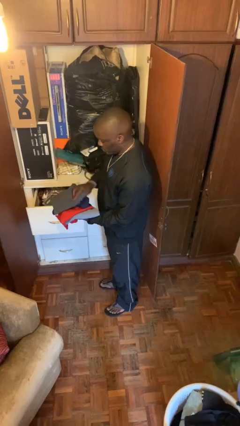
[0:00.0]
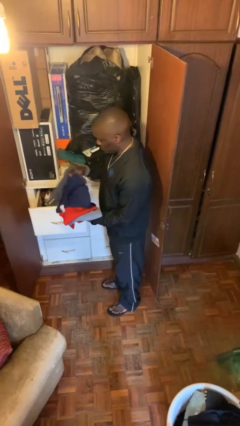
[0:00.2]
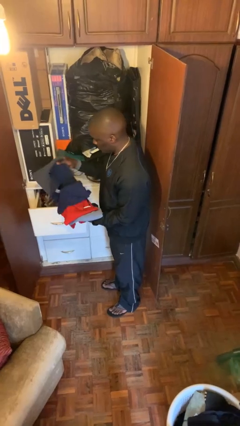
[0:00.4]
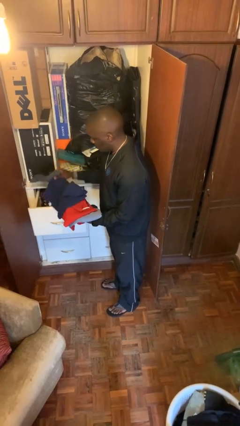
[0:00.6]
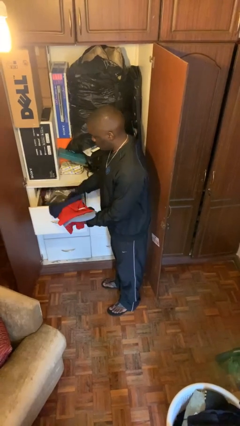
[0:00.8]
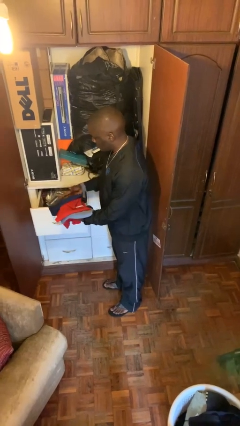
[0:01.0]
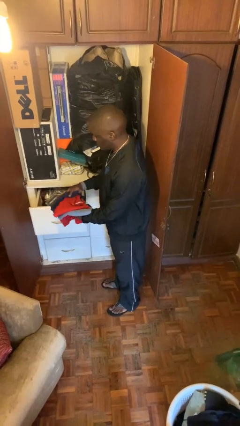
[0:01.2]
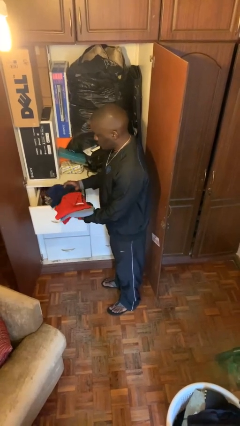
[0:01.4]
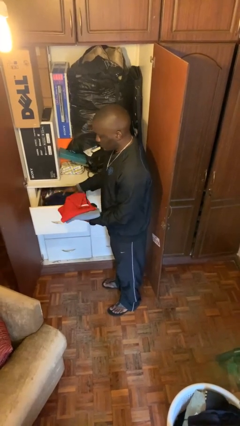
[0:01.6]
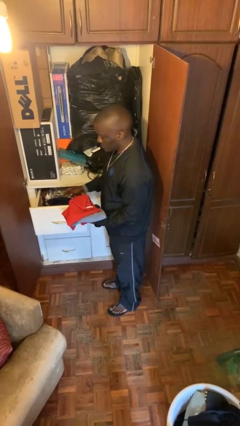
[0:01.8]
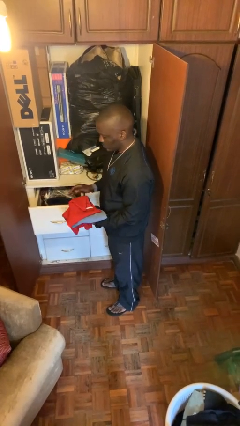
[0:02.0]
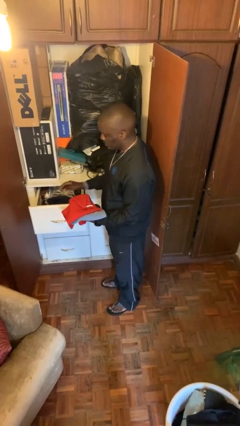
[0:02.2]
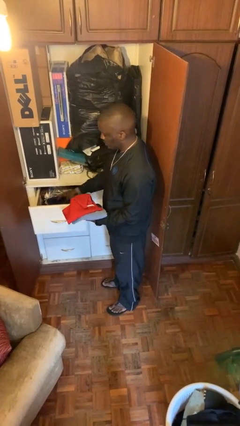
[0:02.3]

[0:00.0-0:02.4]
person puts clothes into dresser

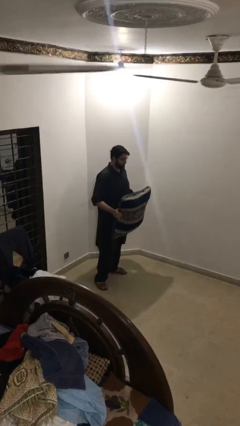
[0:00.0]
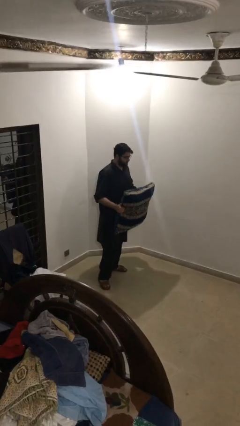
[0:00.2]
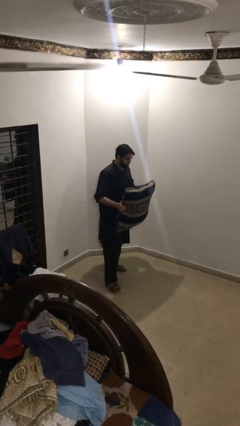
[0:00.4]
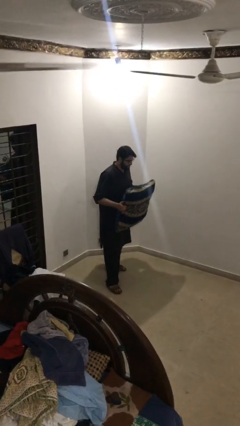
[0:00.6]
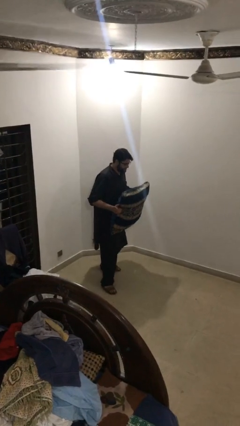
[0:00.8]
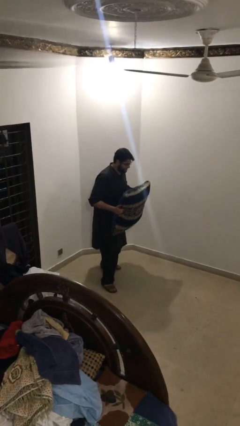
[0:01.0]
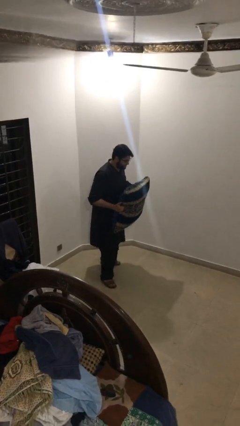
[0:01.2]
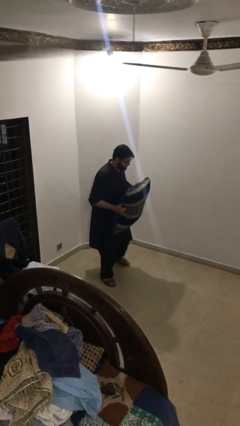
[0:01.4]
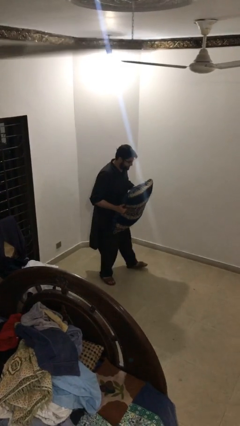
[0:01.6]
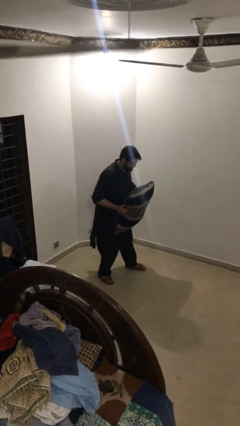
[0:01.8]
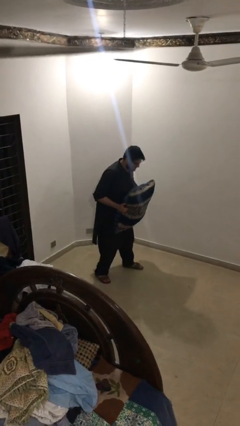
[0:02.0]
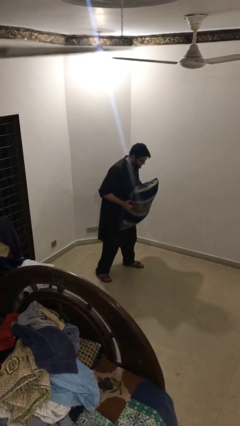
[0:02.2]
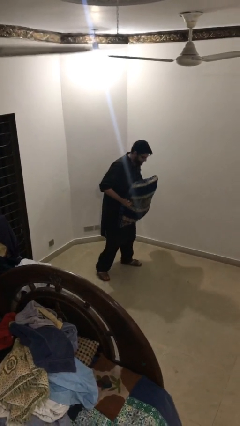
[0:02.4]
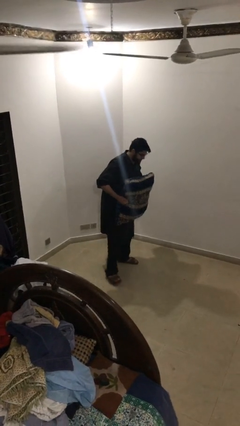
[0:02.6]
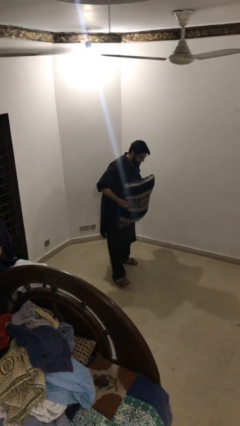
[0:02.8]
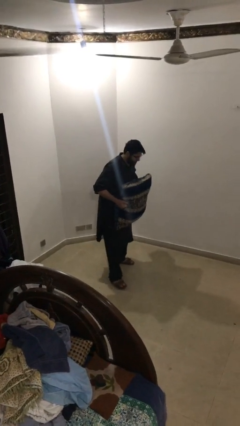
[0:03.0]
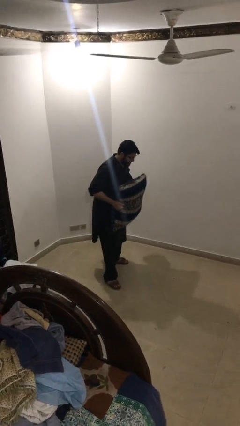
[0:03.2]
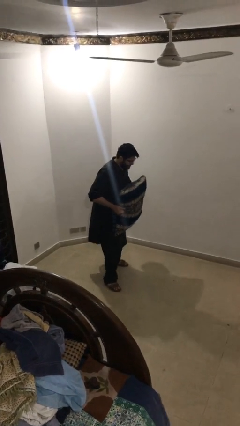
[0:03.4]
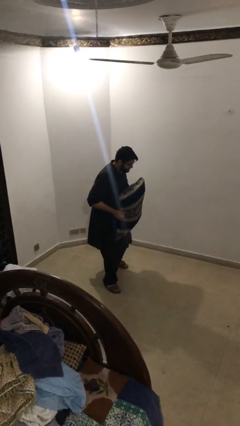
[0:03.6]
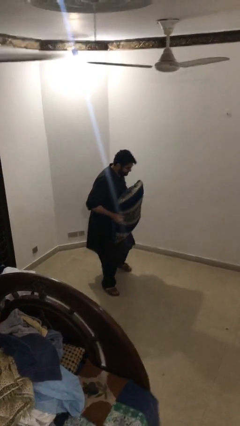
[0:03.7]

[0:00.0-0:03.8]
person carries heavy object

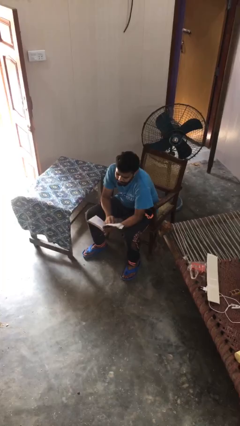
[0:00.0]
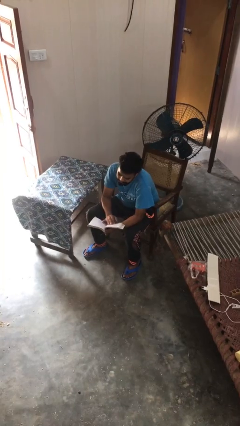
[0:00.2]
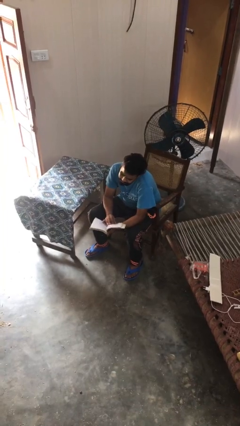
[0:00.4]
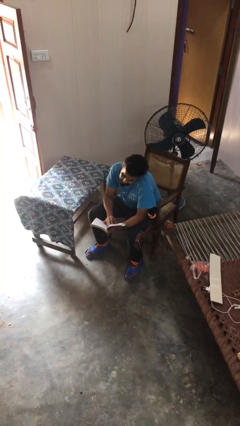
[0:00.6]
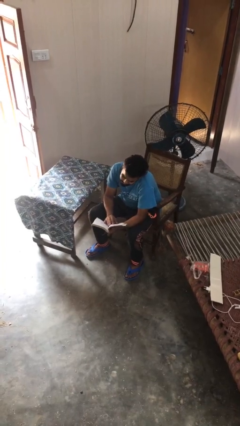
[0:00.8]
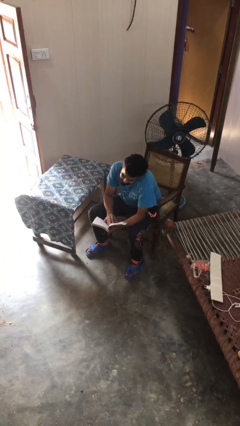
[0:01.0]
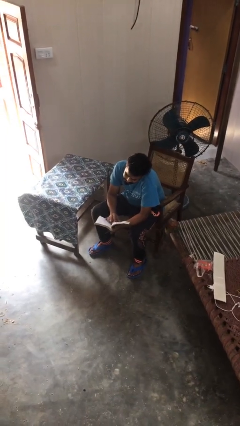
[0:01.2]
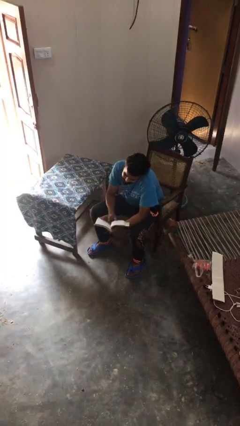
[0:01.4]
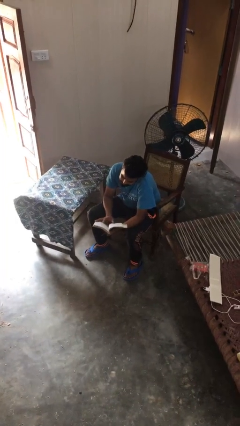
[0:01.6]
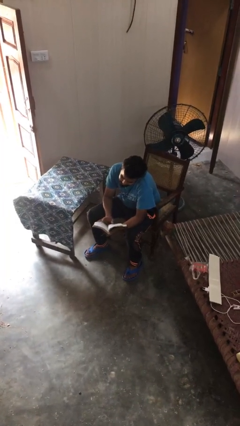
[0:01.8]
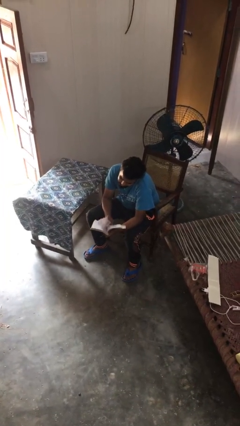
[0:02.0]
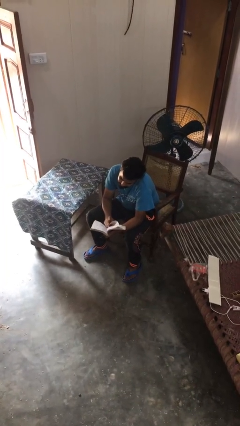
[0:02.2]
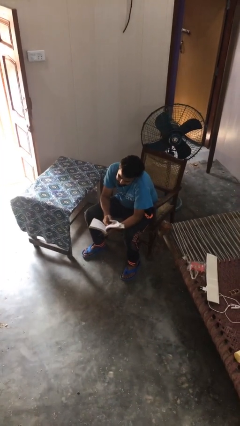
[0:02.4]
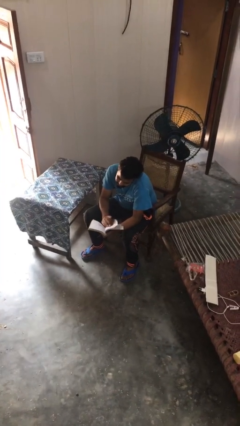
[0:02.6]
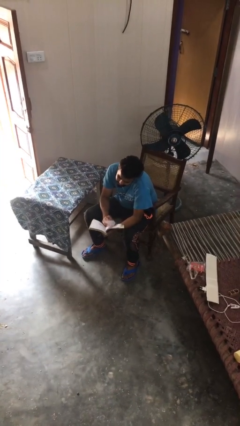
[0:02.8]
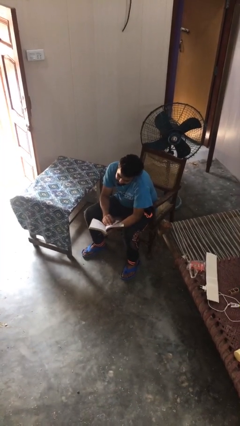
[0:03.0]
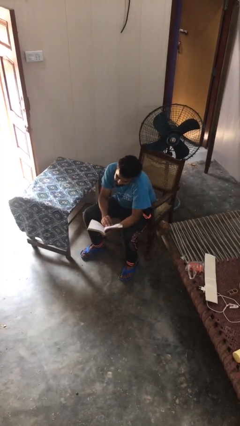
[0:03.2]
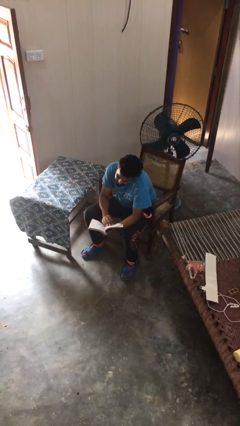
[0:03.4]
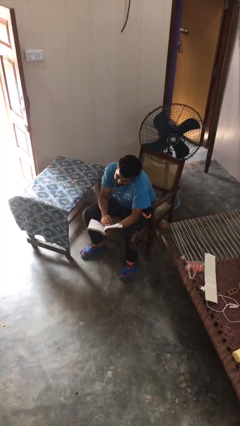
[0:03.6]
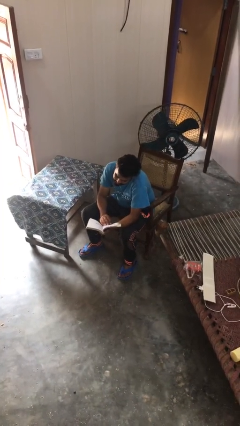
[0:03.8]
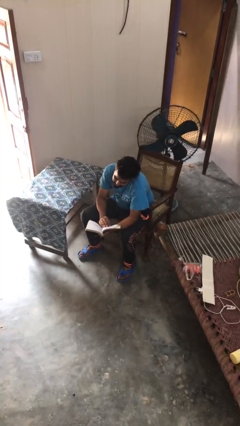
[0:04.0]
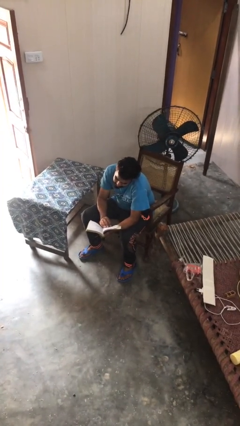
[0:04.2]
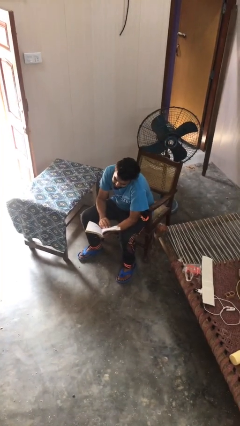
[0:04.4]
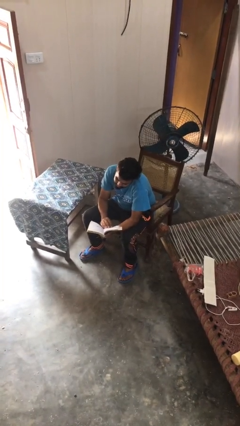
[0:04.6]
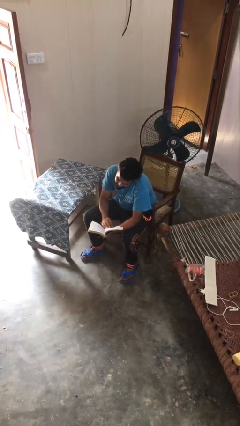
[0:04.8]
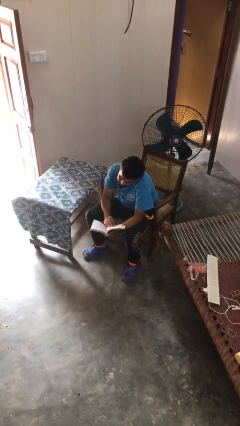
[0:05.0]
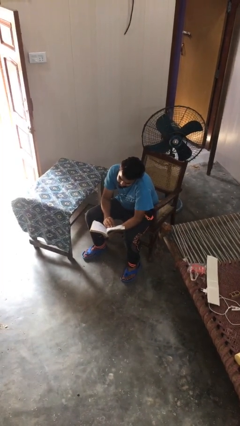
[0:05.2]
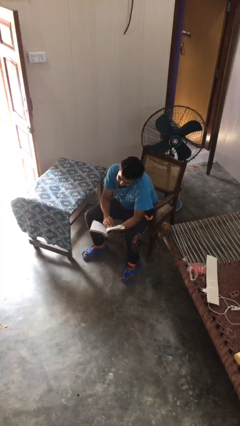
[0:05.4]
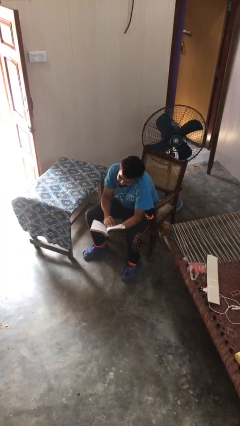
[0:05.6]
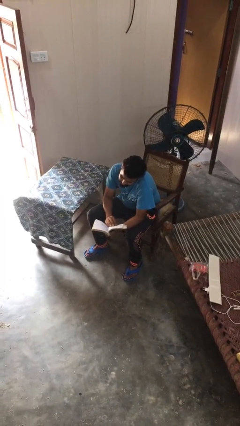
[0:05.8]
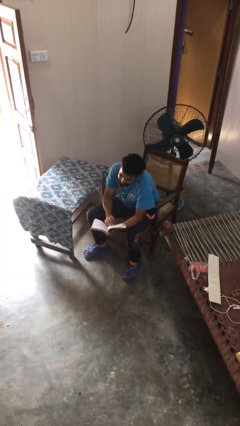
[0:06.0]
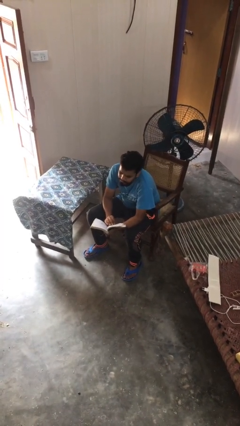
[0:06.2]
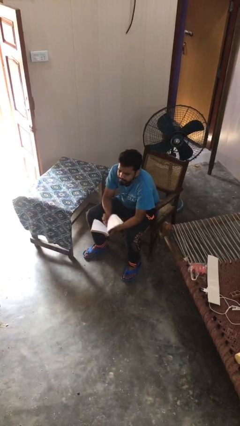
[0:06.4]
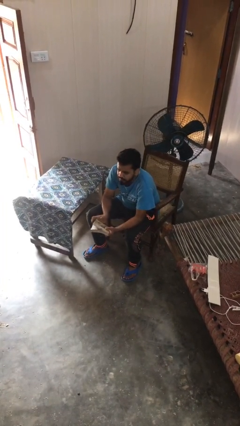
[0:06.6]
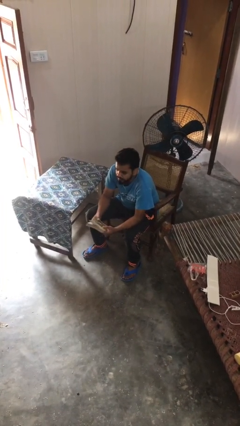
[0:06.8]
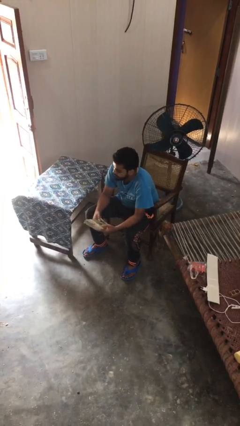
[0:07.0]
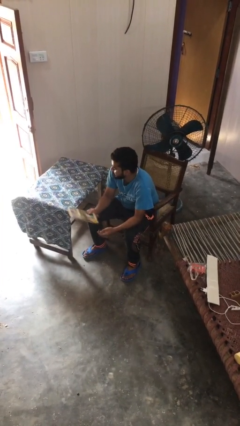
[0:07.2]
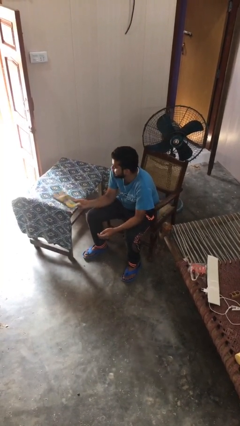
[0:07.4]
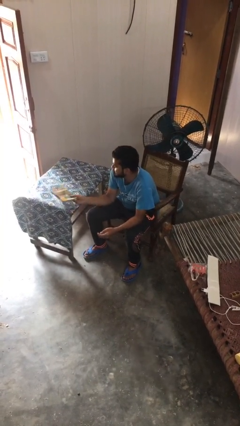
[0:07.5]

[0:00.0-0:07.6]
person reads document

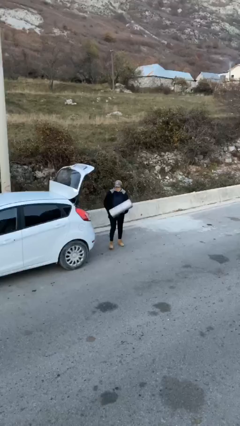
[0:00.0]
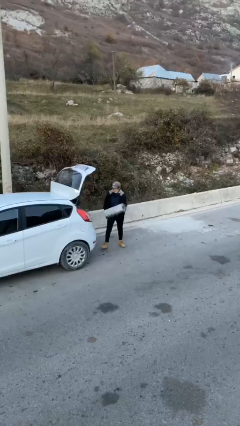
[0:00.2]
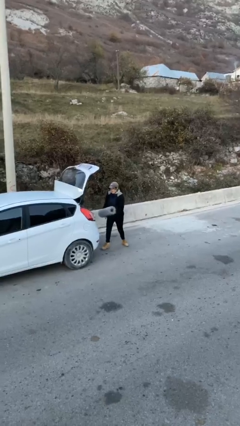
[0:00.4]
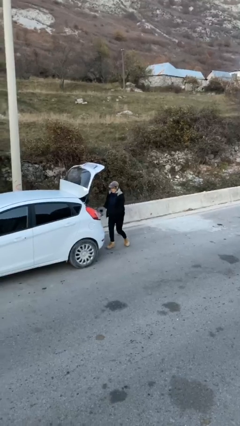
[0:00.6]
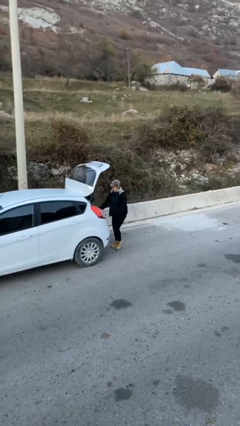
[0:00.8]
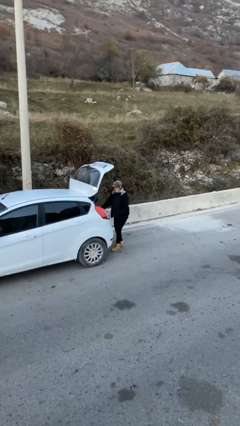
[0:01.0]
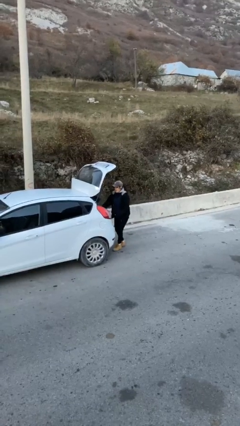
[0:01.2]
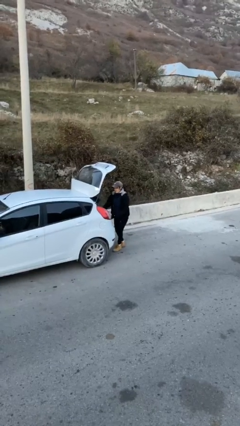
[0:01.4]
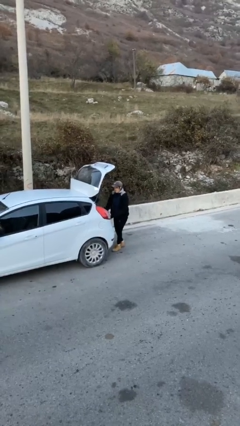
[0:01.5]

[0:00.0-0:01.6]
person loads car

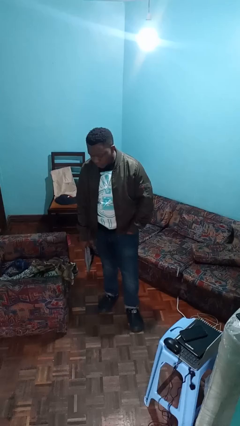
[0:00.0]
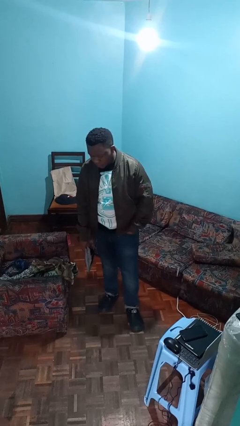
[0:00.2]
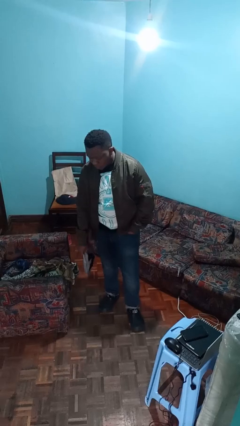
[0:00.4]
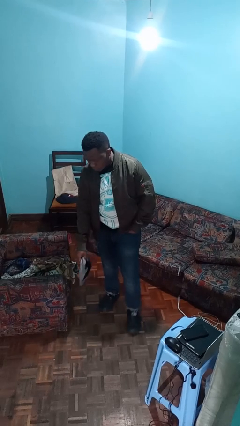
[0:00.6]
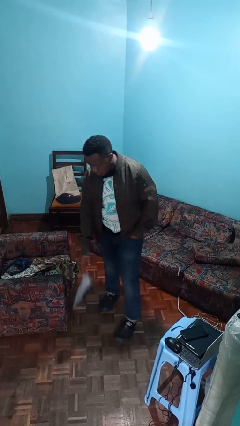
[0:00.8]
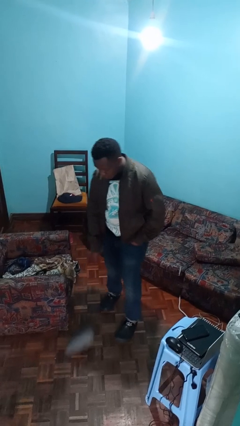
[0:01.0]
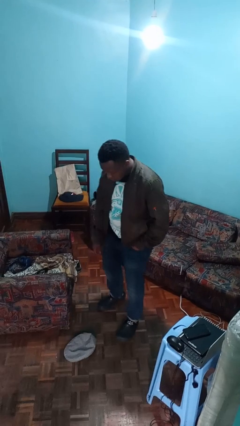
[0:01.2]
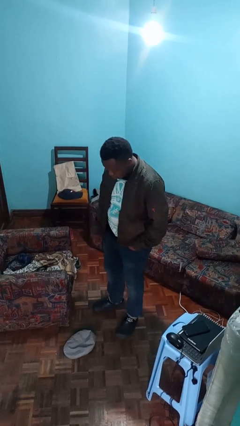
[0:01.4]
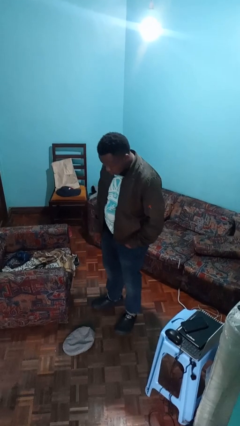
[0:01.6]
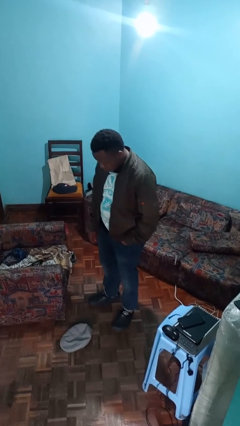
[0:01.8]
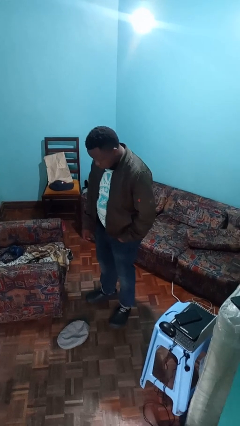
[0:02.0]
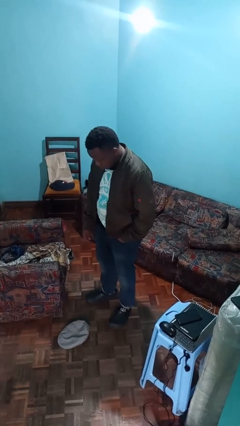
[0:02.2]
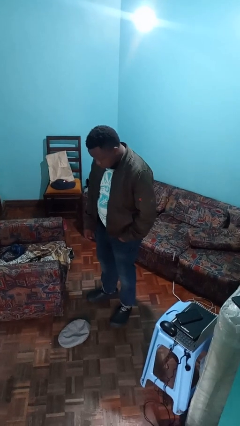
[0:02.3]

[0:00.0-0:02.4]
person drops object
